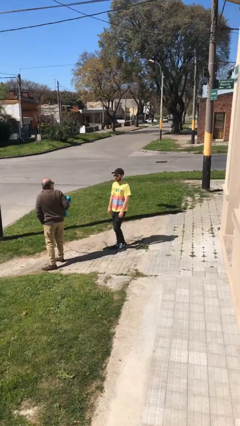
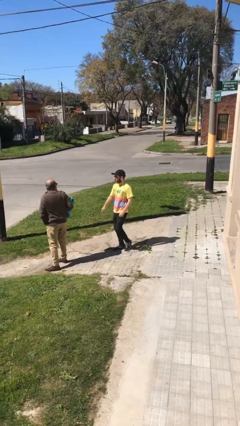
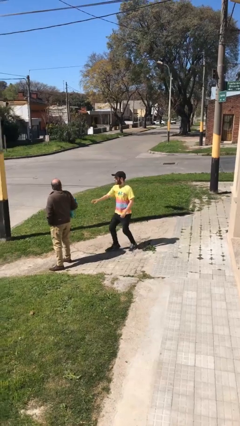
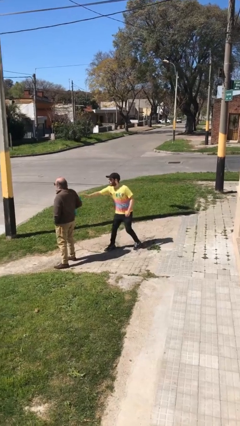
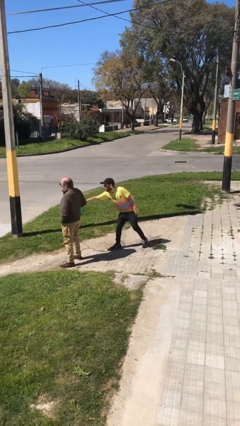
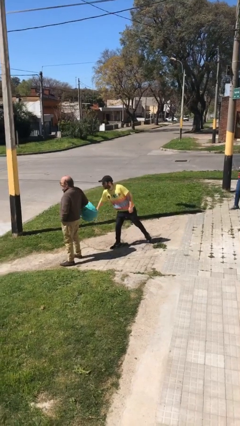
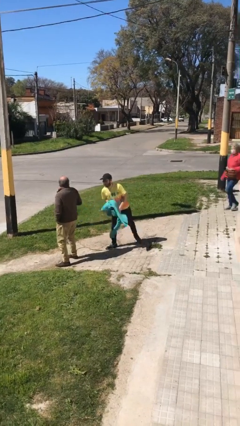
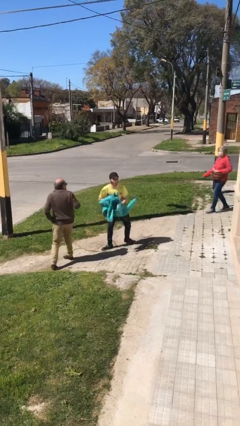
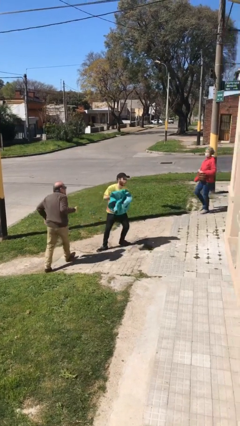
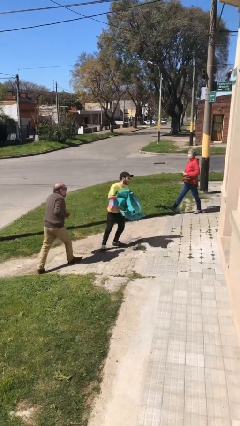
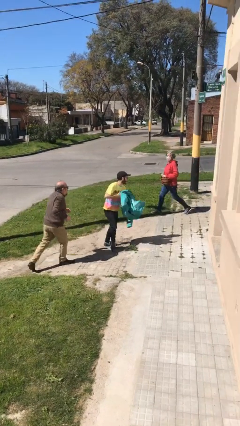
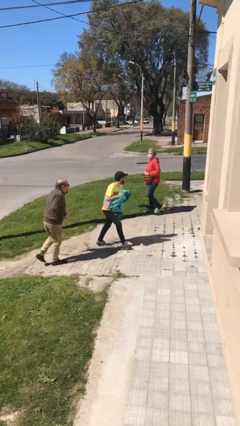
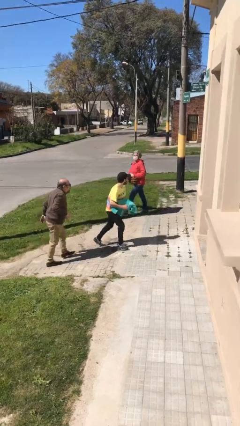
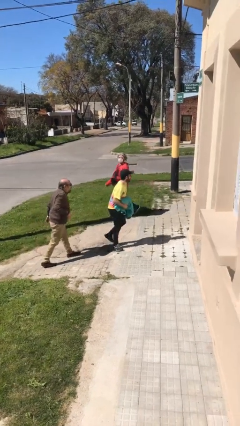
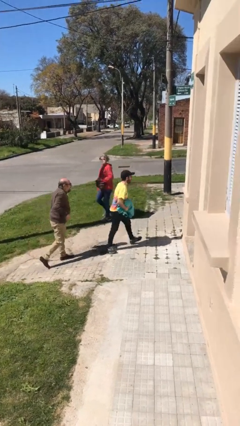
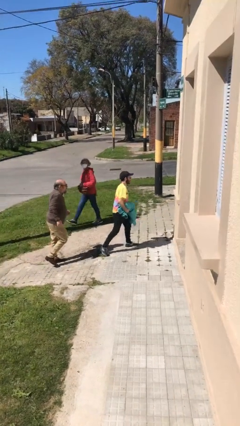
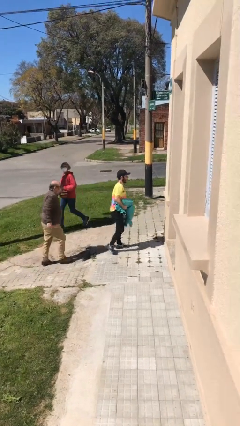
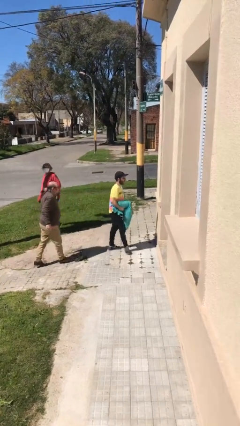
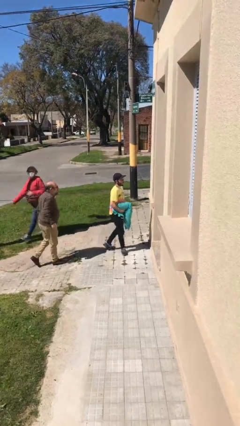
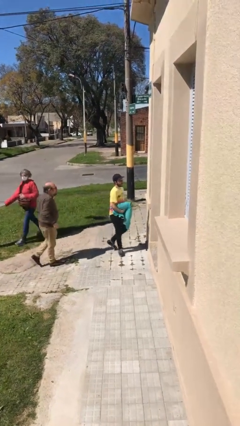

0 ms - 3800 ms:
person steals object from person

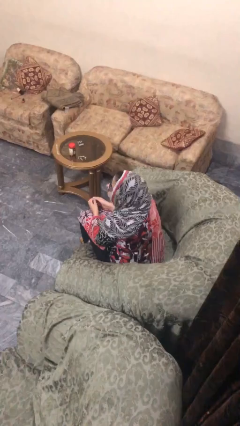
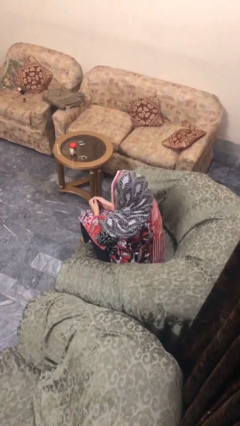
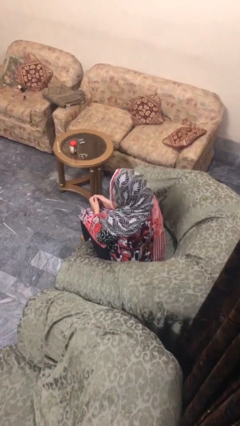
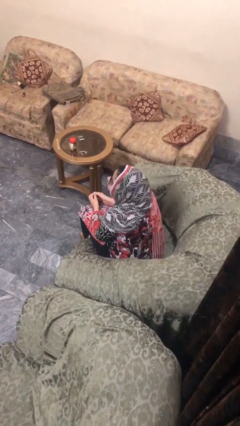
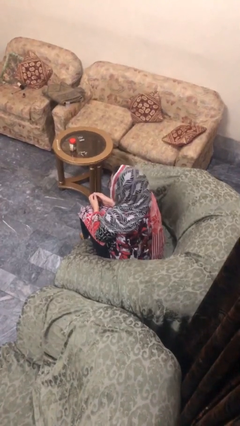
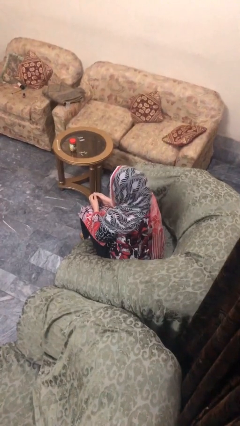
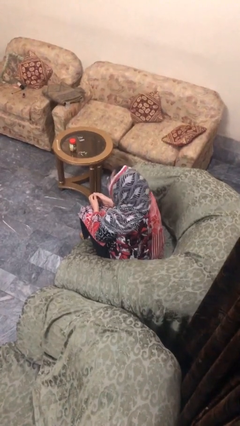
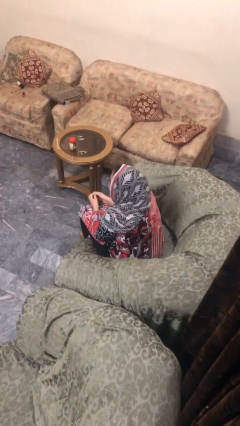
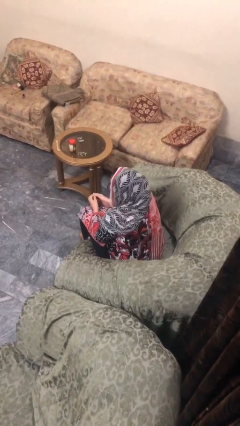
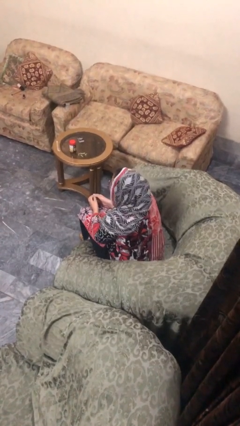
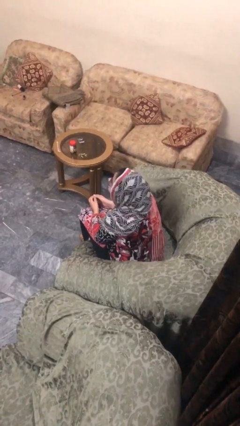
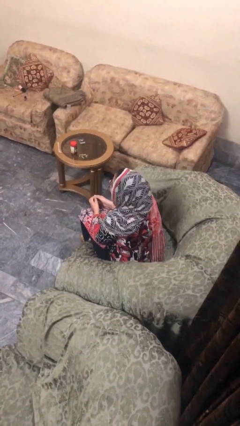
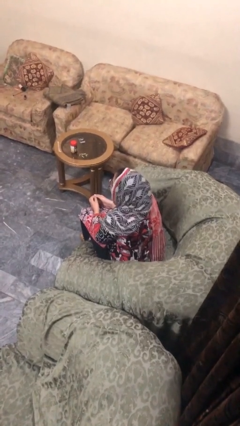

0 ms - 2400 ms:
person nods head

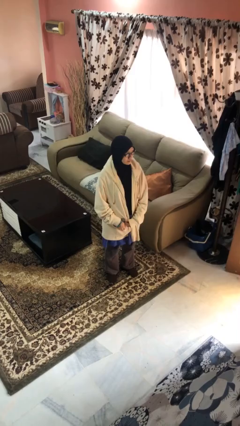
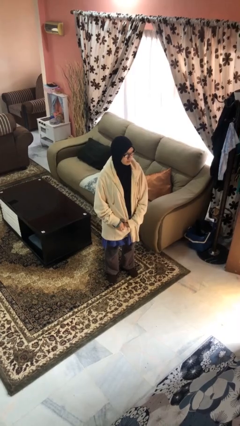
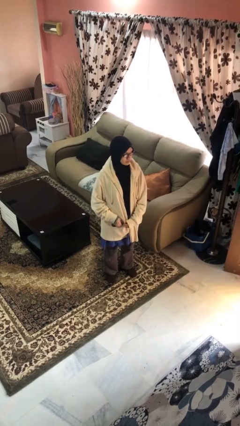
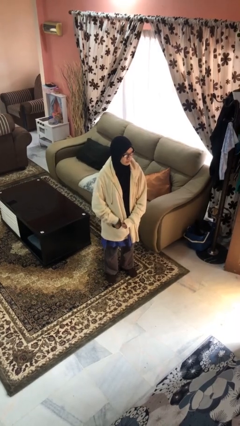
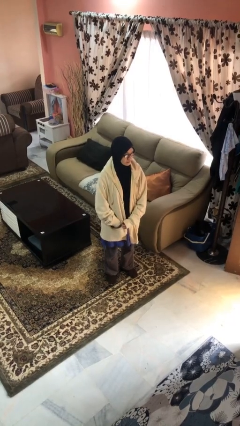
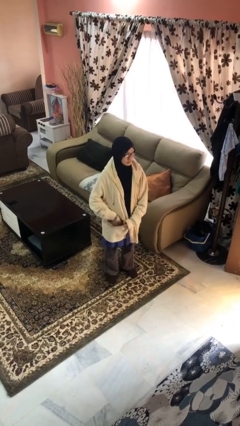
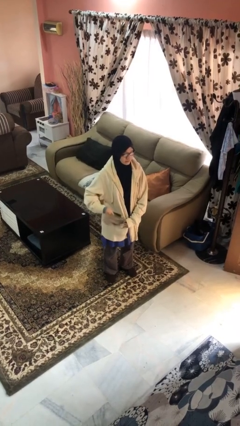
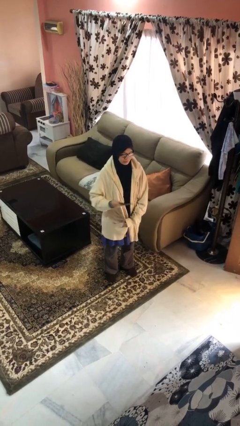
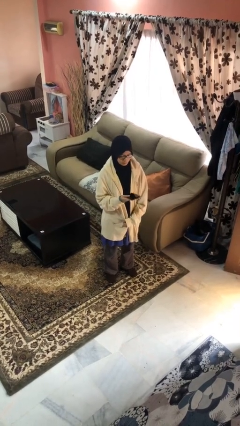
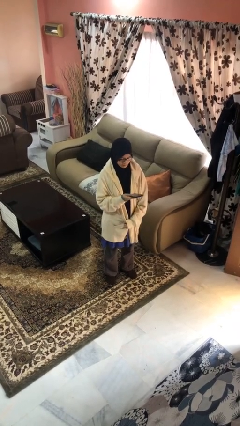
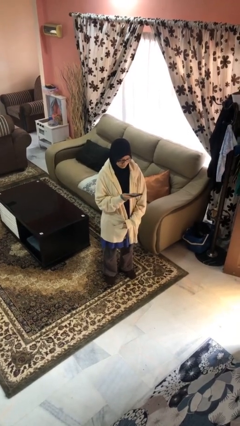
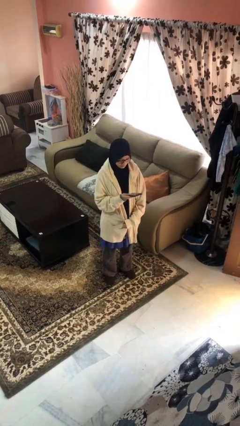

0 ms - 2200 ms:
person takes phone from pocket

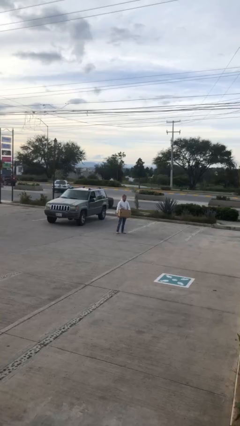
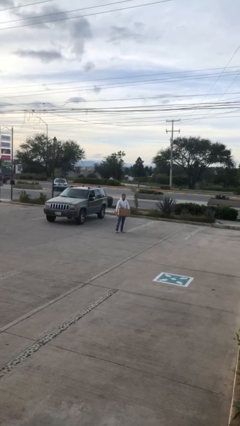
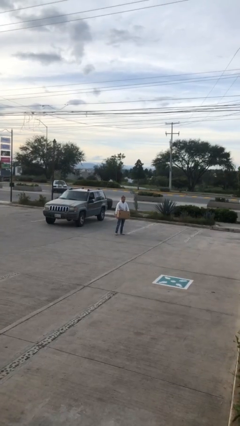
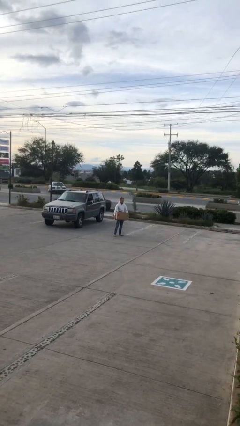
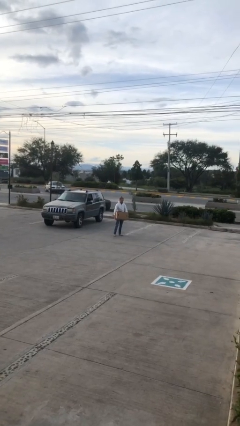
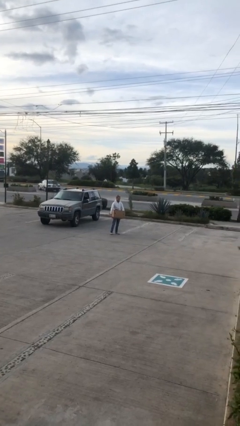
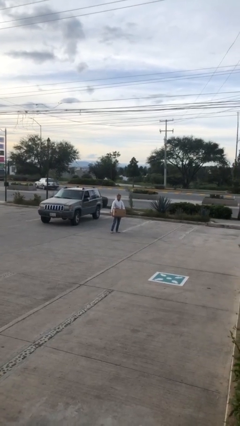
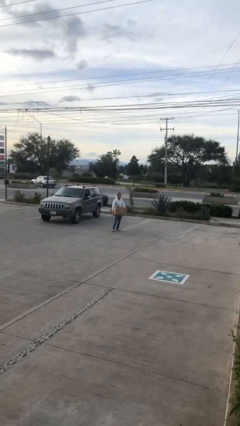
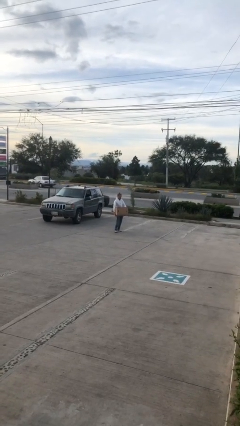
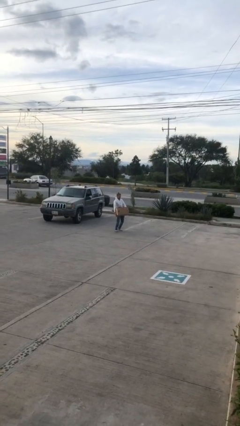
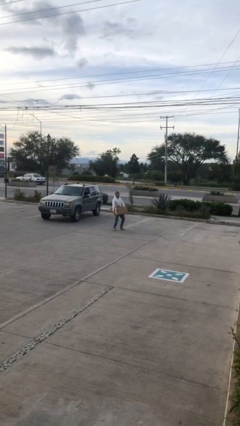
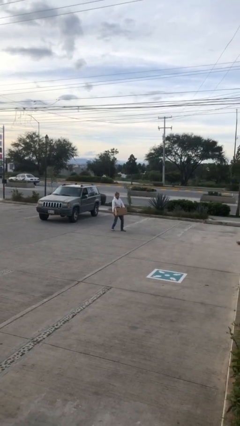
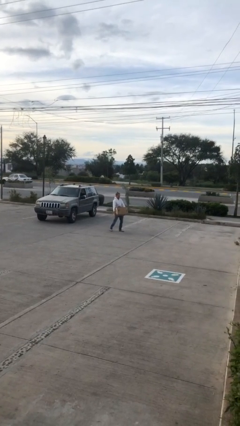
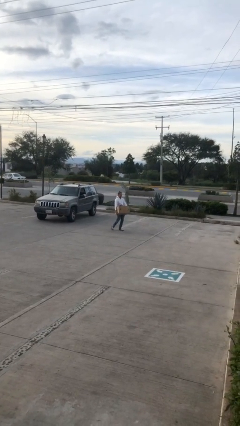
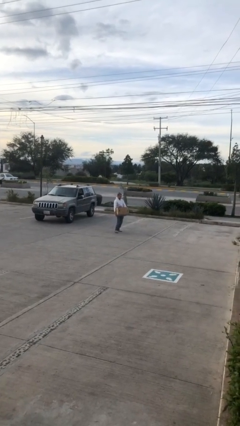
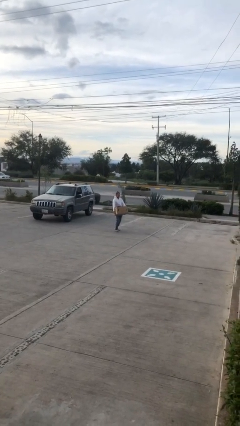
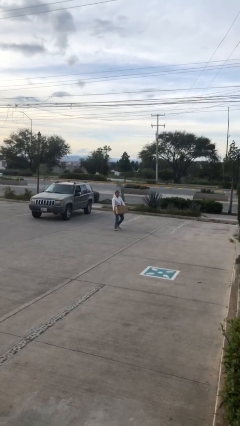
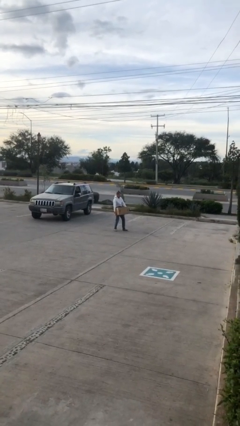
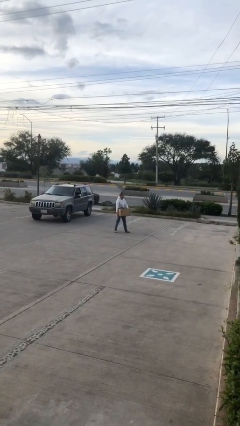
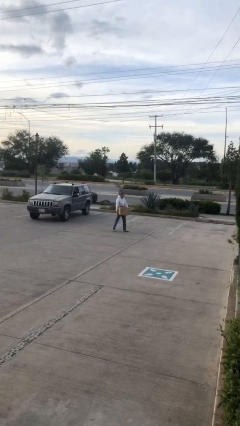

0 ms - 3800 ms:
person carries heavy object

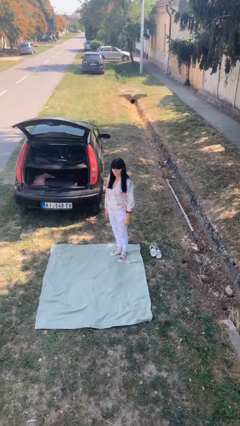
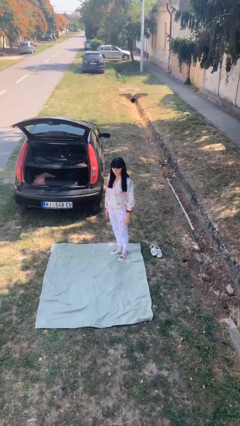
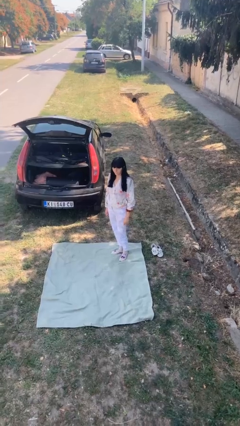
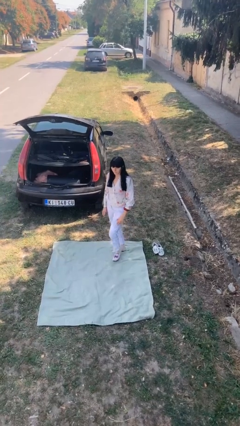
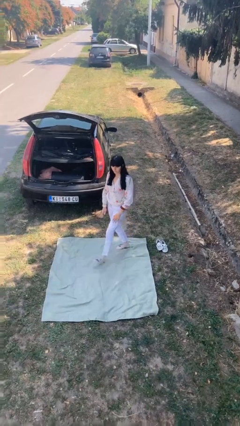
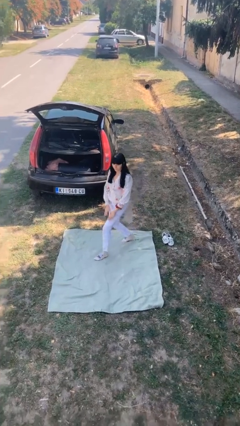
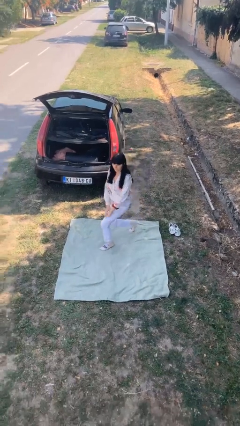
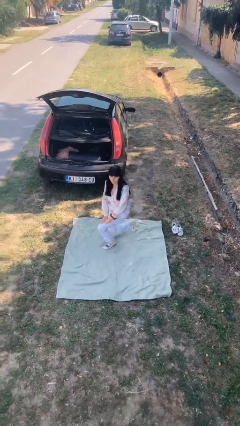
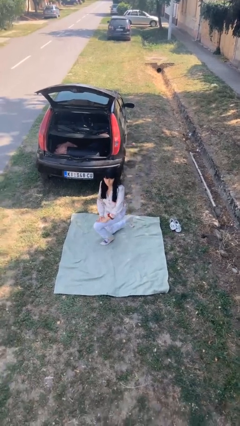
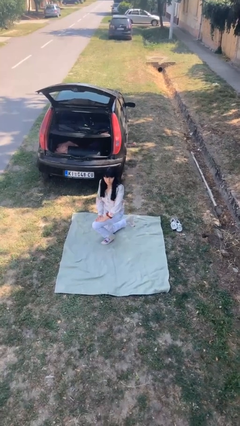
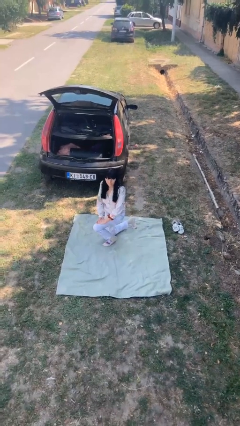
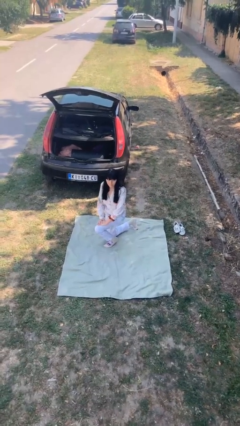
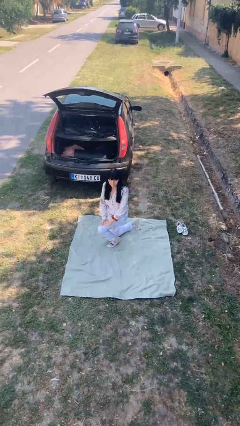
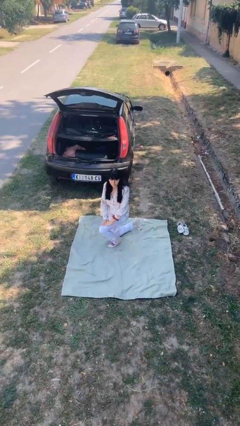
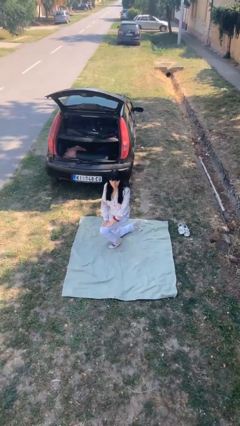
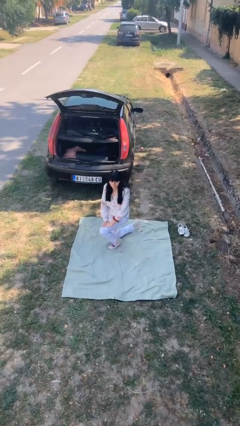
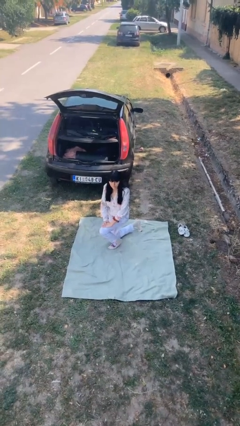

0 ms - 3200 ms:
person kneels

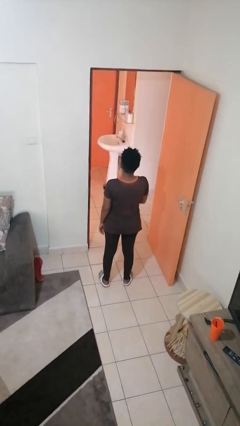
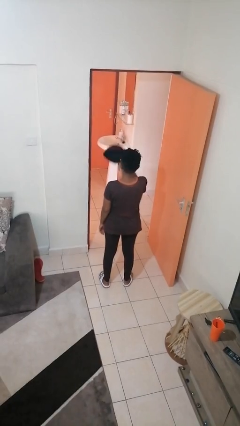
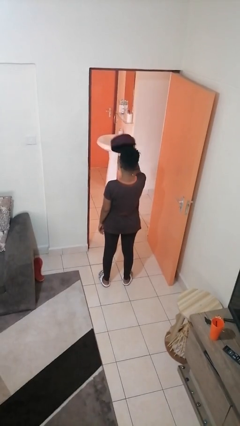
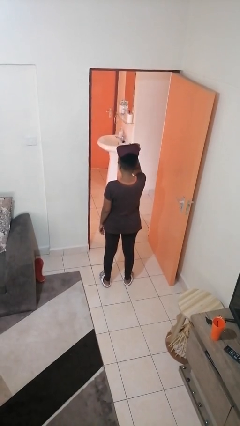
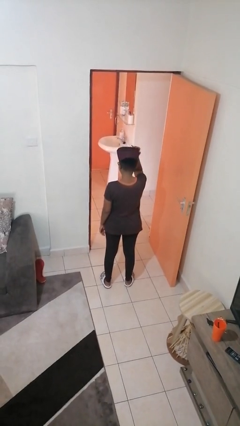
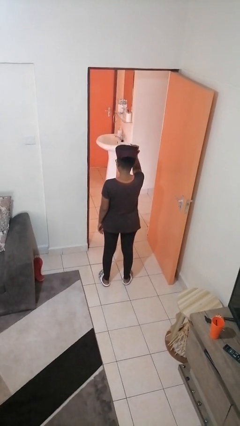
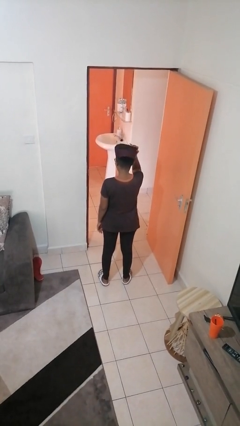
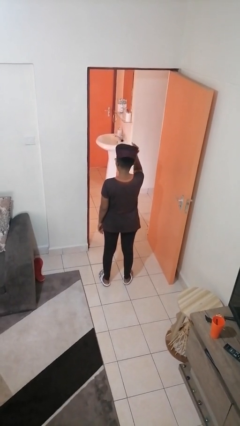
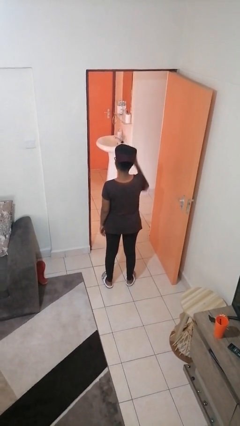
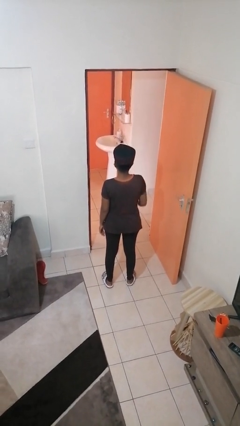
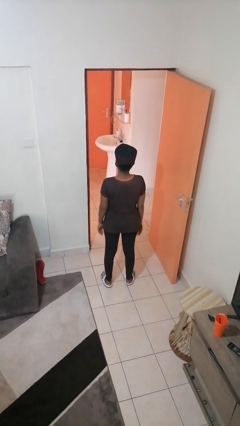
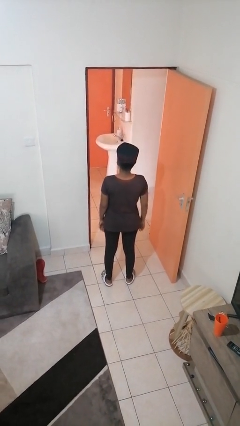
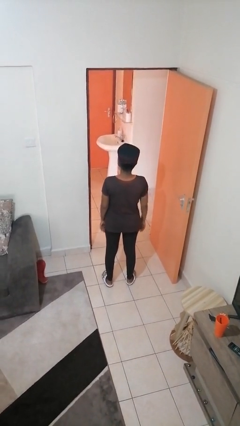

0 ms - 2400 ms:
person puts on hat
